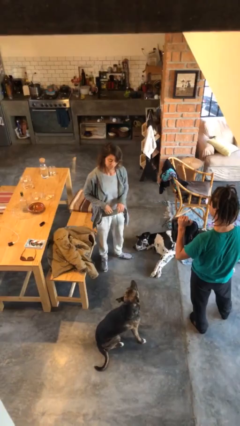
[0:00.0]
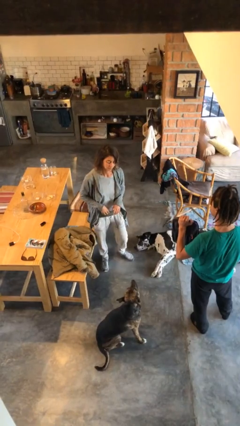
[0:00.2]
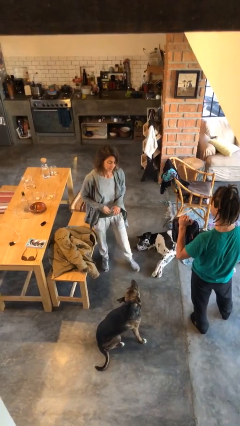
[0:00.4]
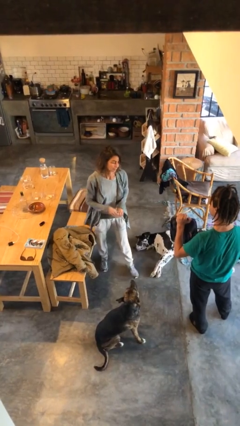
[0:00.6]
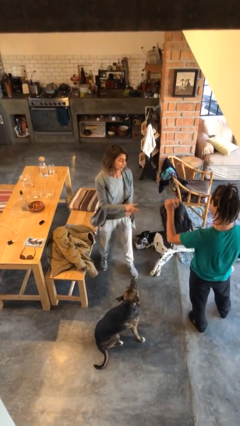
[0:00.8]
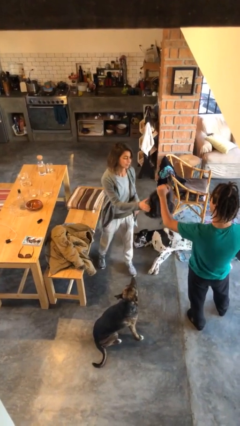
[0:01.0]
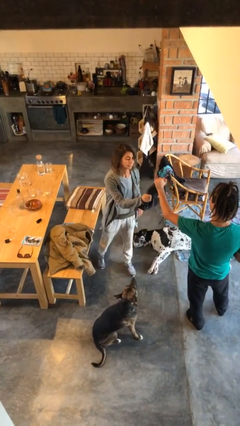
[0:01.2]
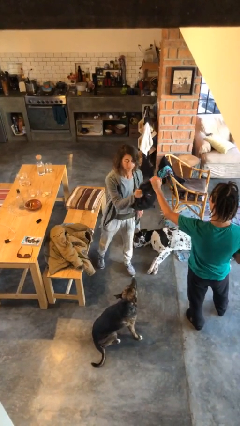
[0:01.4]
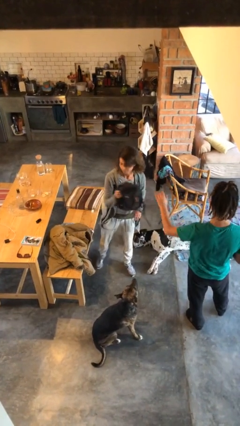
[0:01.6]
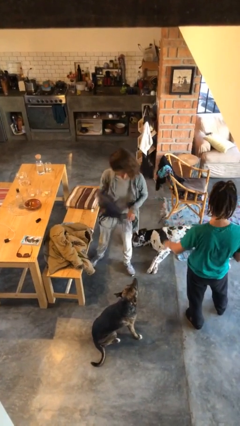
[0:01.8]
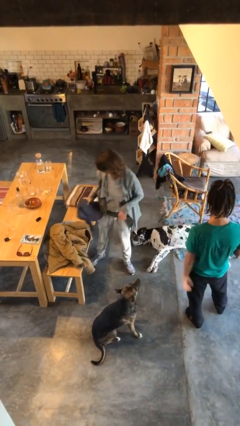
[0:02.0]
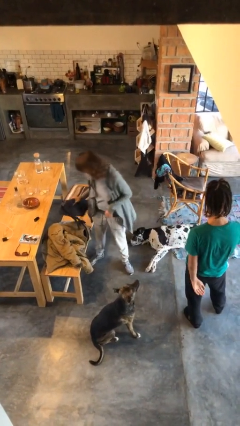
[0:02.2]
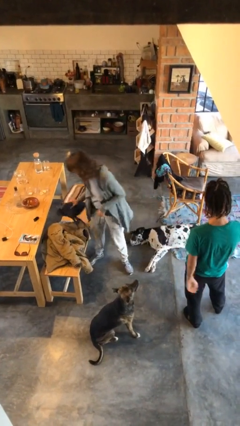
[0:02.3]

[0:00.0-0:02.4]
person transfers object to person

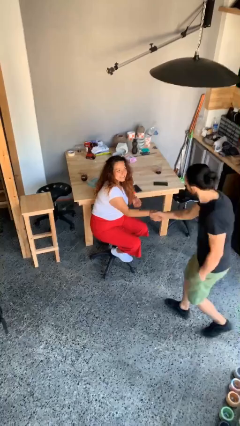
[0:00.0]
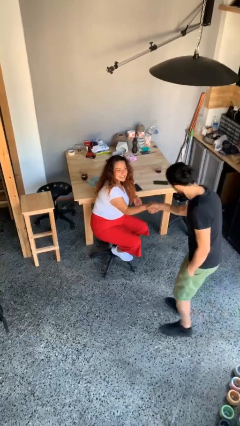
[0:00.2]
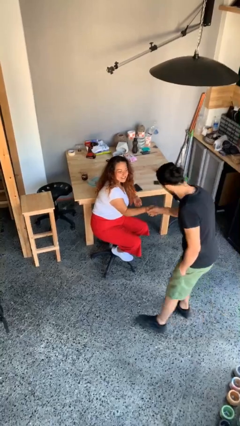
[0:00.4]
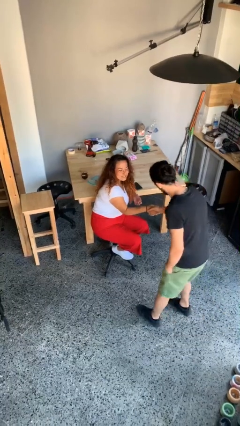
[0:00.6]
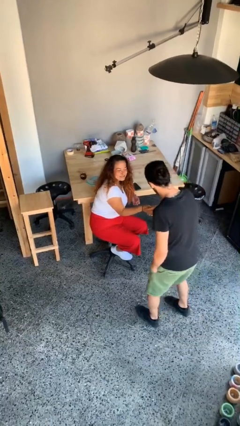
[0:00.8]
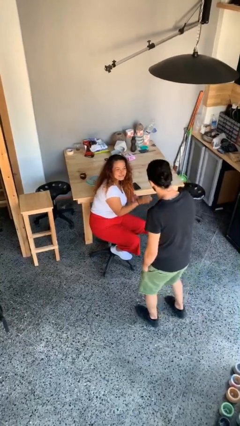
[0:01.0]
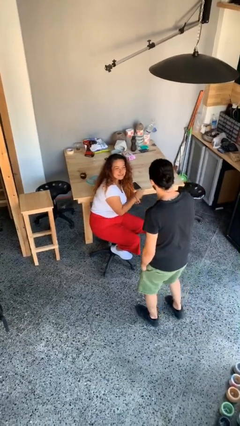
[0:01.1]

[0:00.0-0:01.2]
person shakes hand

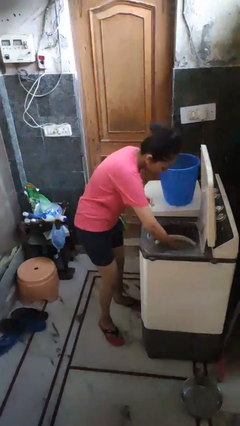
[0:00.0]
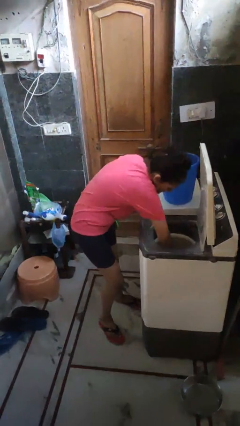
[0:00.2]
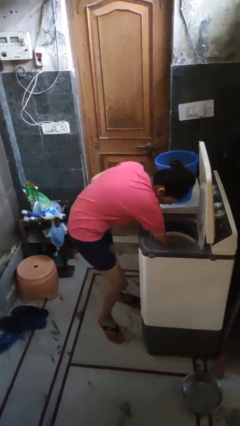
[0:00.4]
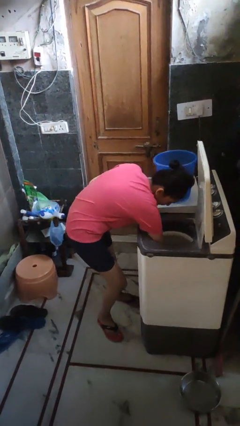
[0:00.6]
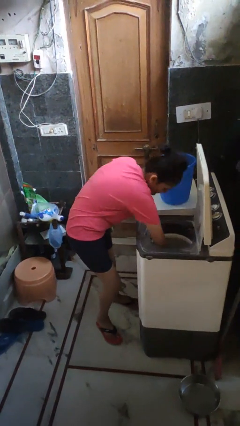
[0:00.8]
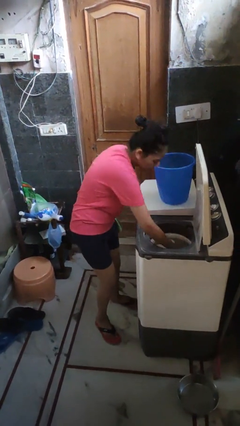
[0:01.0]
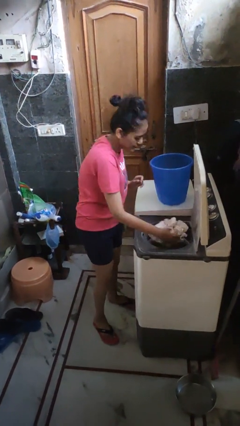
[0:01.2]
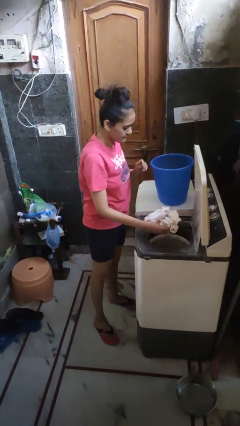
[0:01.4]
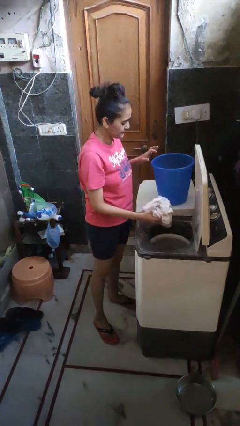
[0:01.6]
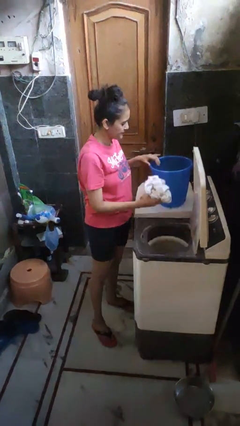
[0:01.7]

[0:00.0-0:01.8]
person takes clothes from dresser

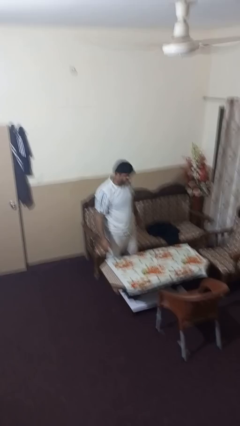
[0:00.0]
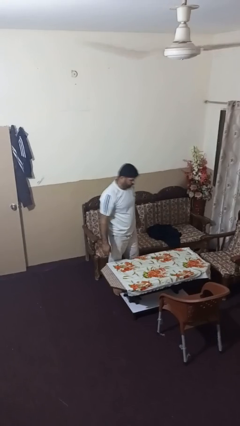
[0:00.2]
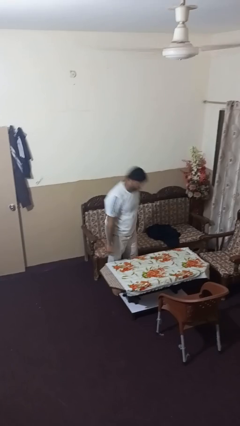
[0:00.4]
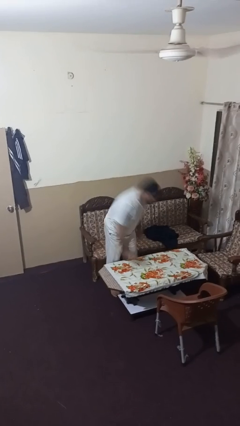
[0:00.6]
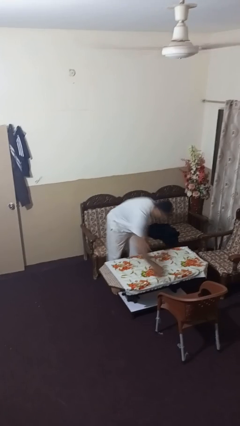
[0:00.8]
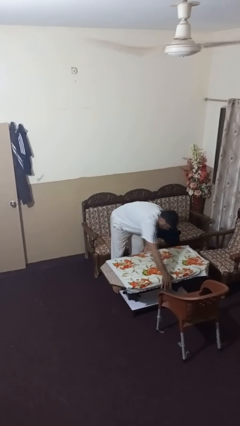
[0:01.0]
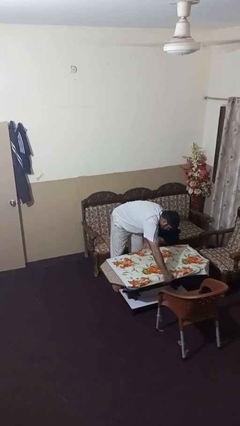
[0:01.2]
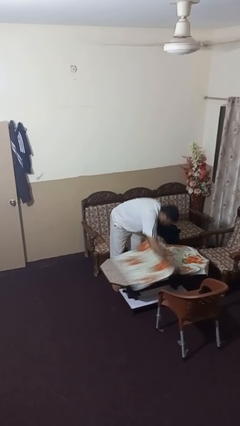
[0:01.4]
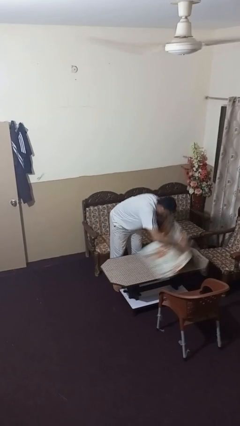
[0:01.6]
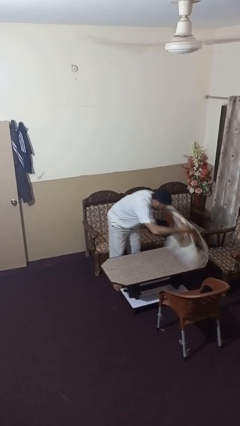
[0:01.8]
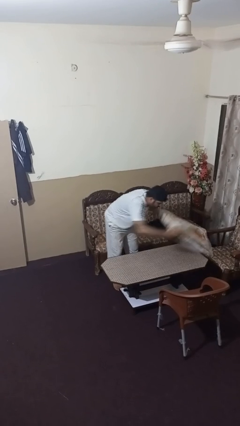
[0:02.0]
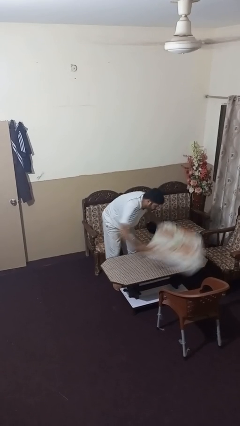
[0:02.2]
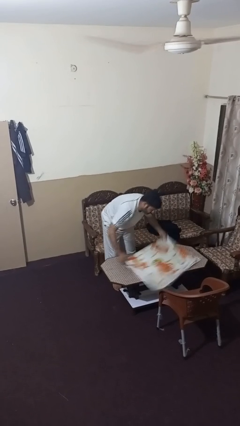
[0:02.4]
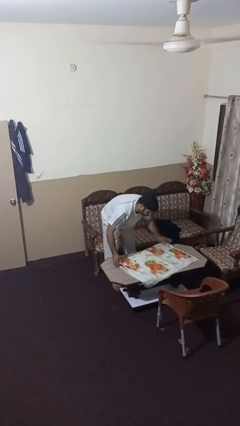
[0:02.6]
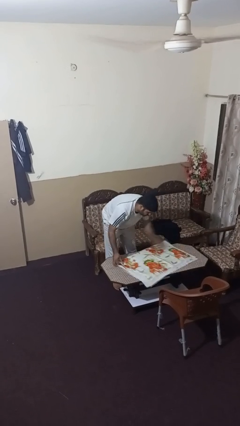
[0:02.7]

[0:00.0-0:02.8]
person folds tablecloth

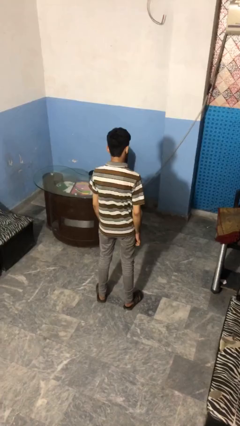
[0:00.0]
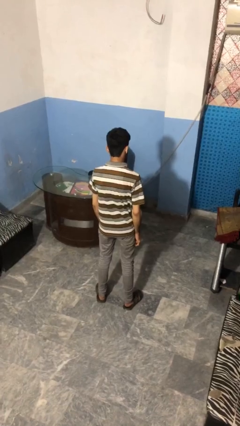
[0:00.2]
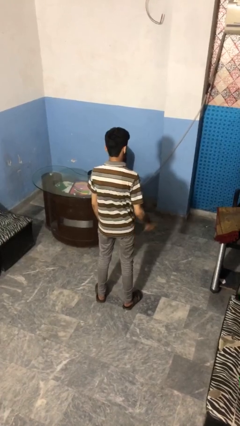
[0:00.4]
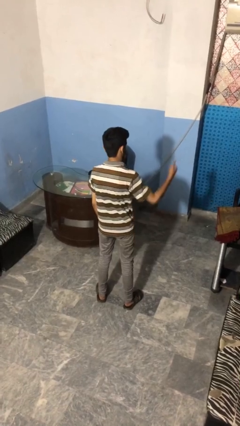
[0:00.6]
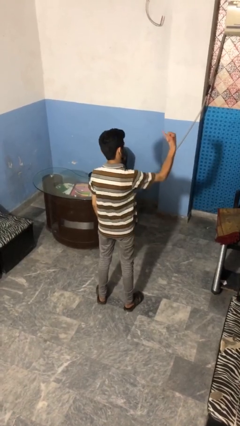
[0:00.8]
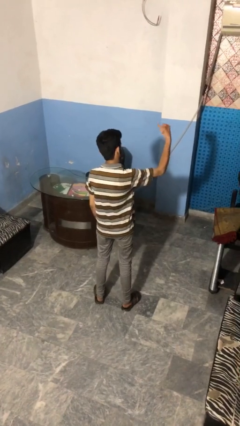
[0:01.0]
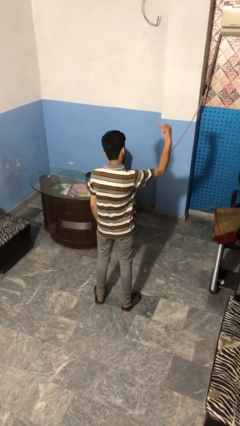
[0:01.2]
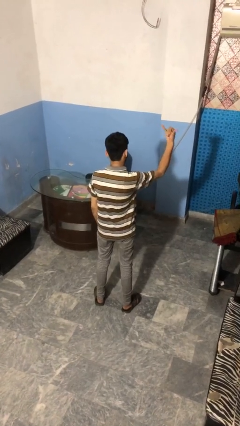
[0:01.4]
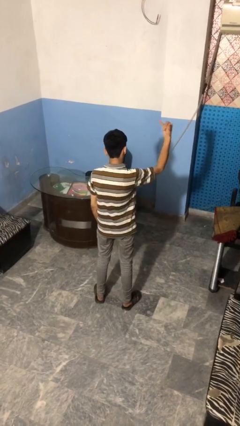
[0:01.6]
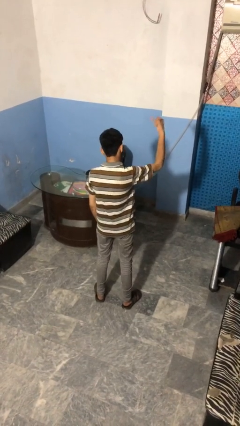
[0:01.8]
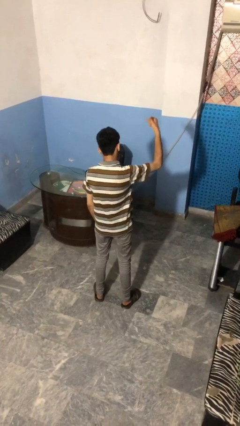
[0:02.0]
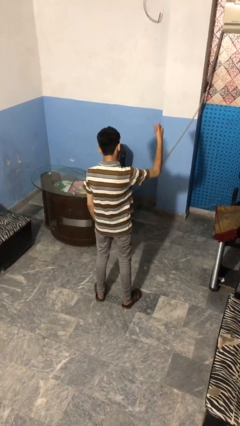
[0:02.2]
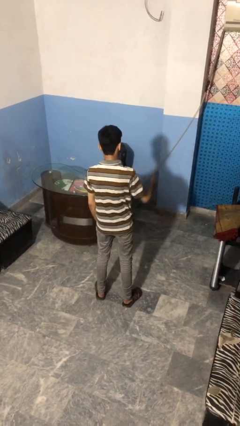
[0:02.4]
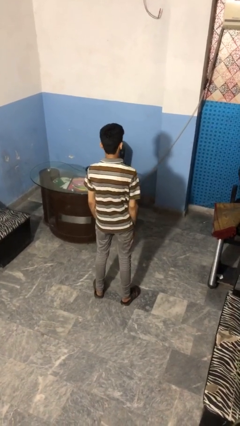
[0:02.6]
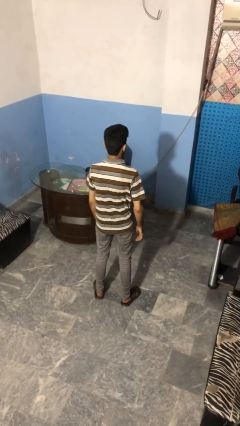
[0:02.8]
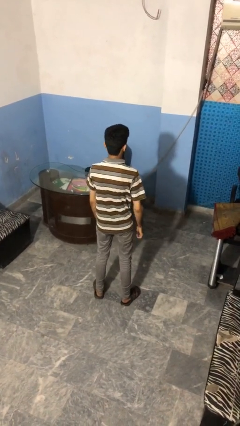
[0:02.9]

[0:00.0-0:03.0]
person gestures hang loose

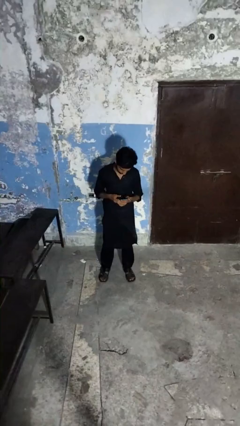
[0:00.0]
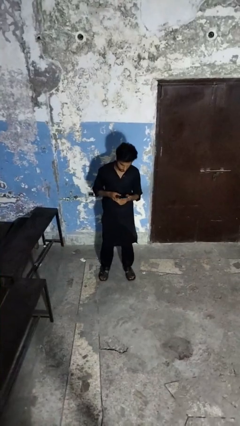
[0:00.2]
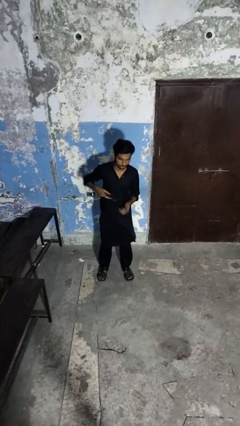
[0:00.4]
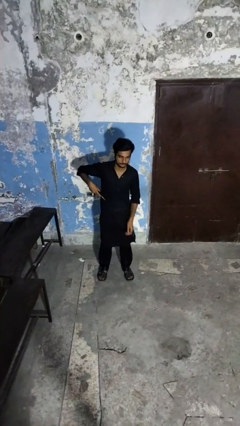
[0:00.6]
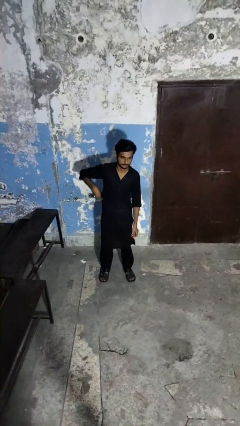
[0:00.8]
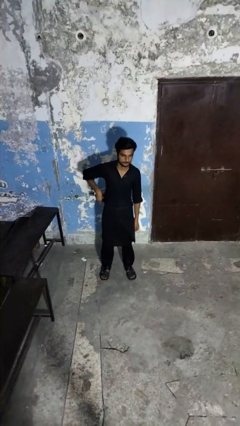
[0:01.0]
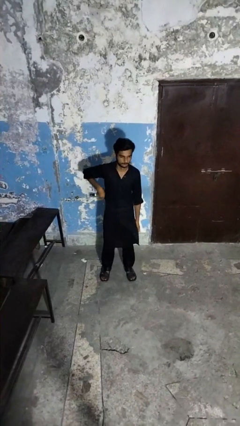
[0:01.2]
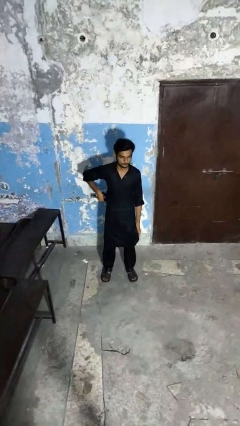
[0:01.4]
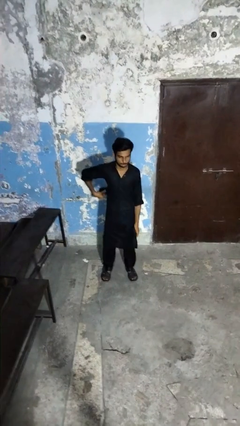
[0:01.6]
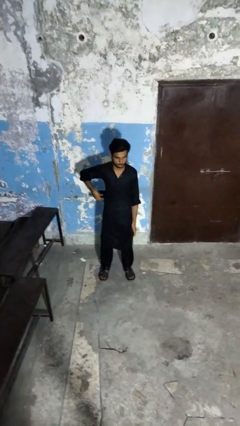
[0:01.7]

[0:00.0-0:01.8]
person puts phone into pocket

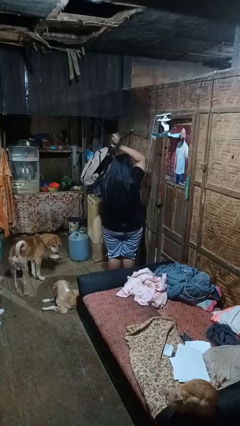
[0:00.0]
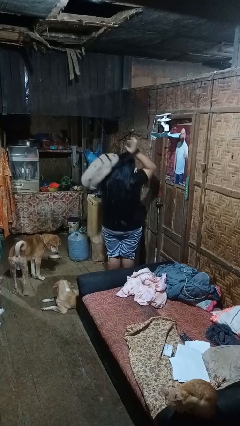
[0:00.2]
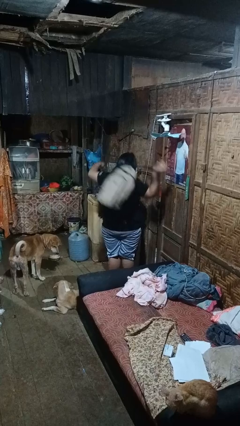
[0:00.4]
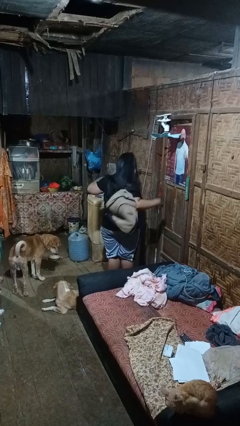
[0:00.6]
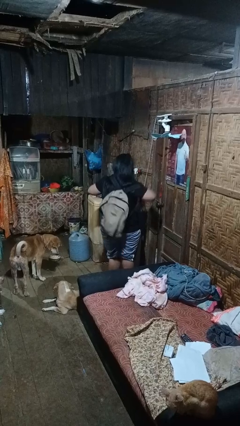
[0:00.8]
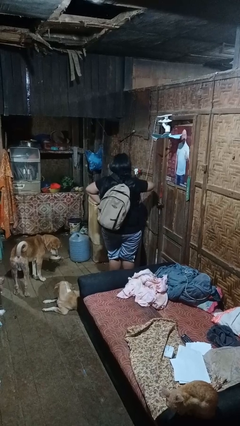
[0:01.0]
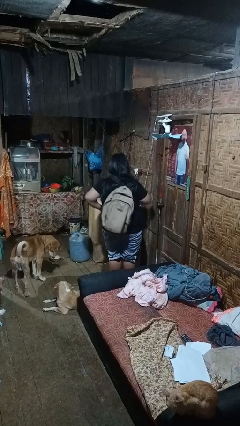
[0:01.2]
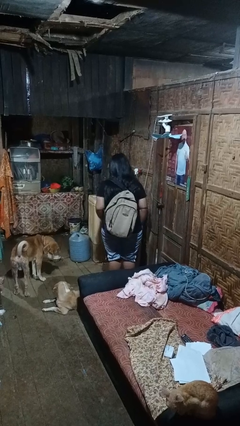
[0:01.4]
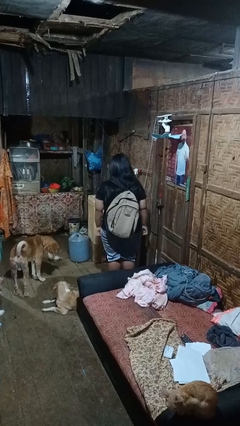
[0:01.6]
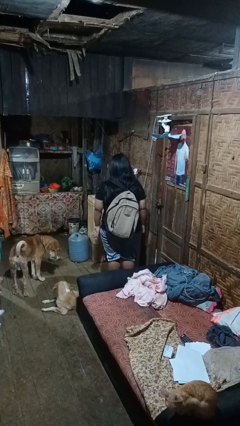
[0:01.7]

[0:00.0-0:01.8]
person puts on backpack

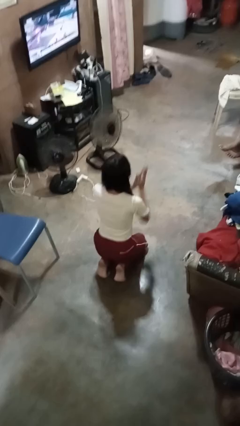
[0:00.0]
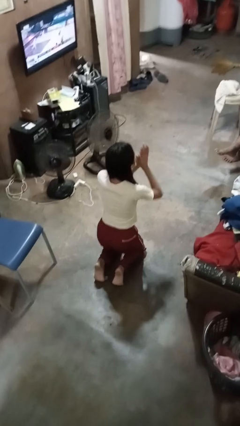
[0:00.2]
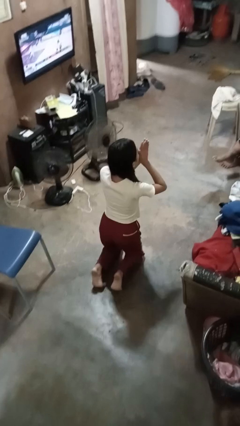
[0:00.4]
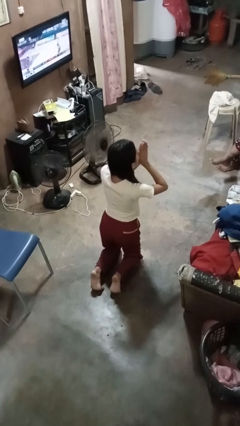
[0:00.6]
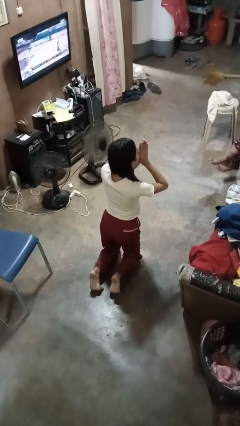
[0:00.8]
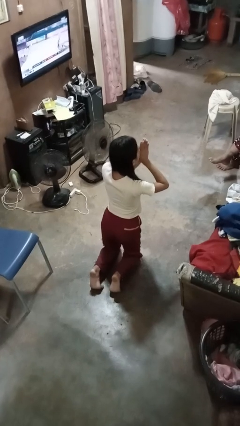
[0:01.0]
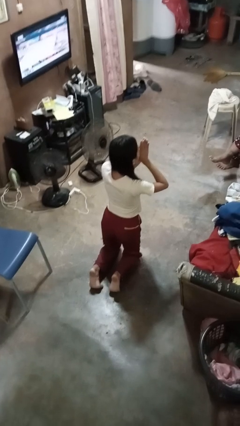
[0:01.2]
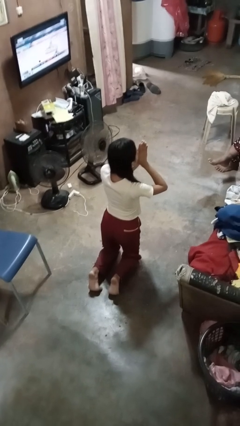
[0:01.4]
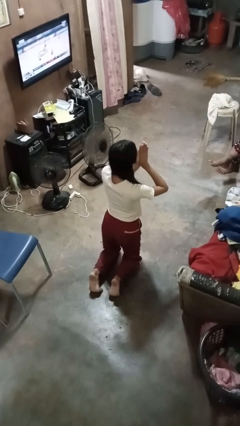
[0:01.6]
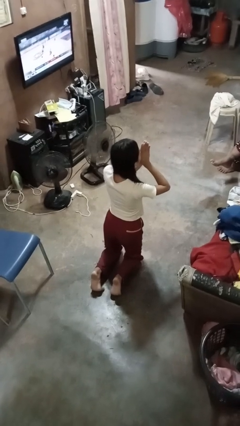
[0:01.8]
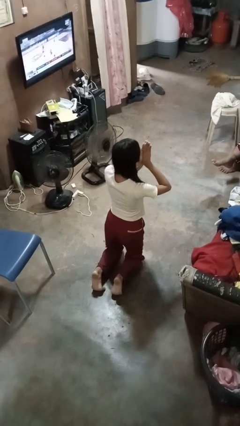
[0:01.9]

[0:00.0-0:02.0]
person prays
